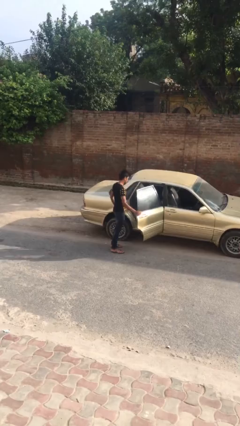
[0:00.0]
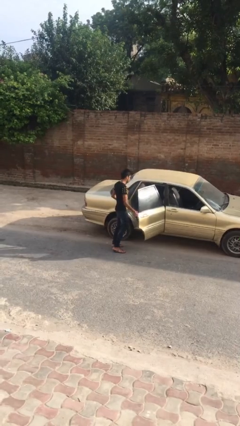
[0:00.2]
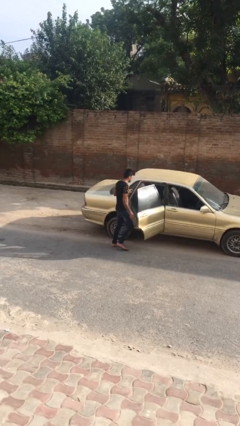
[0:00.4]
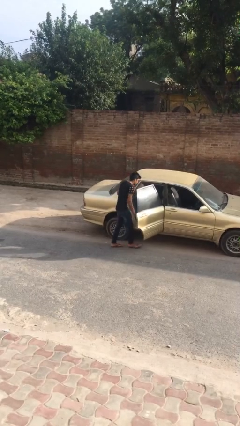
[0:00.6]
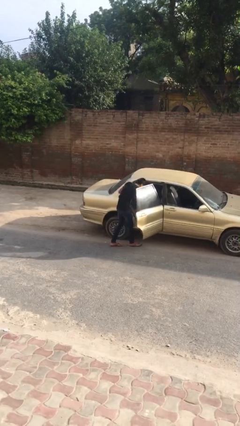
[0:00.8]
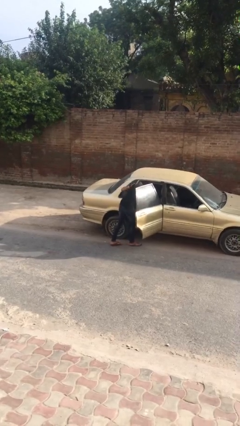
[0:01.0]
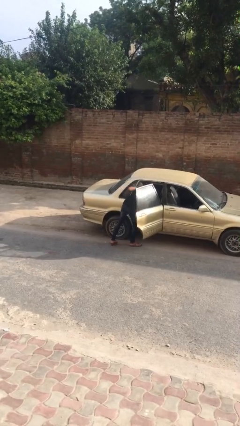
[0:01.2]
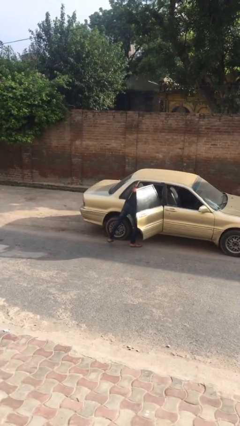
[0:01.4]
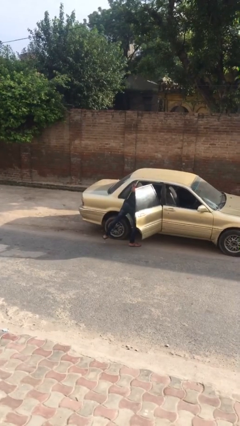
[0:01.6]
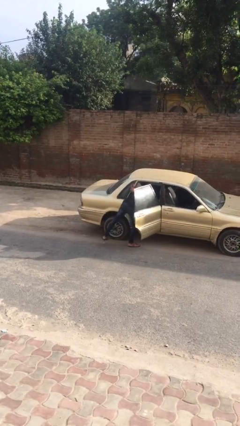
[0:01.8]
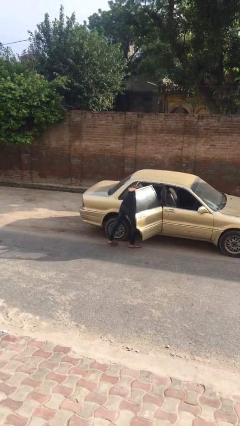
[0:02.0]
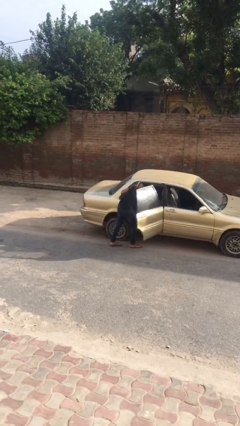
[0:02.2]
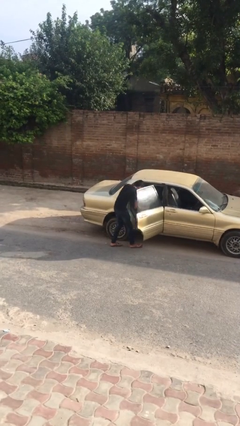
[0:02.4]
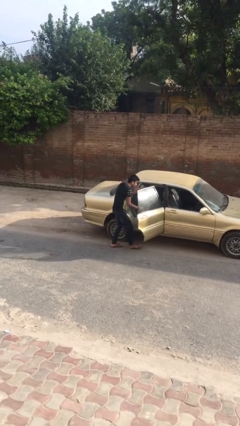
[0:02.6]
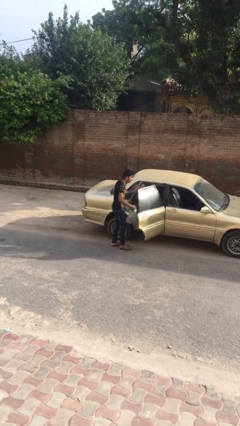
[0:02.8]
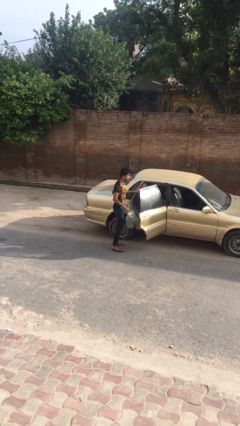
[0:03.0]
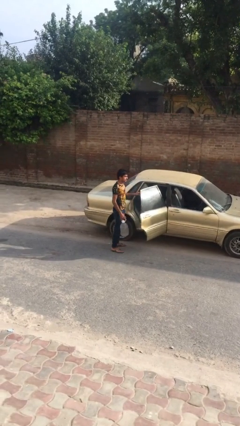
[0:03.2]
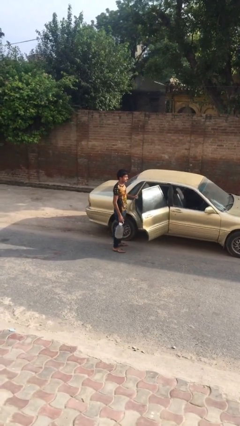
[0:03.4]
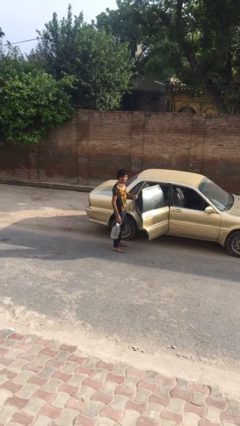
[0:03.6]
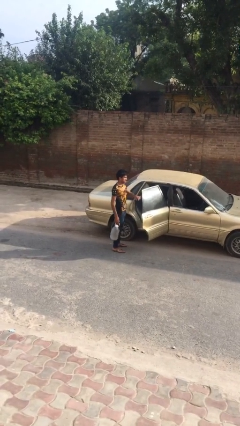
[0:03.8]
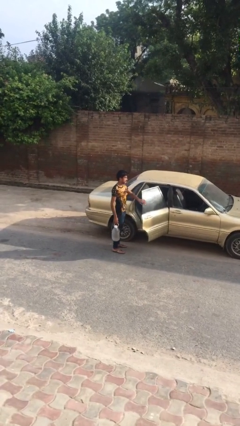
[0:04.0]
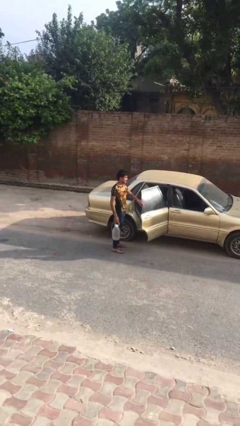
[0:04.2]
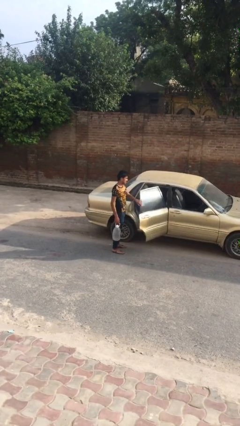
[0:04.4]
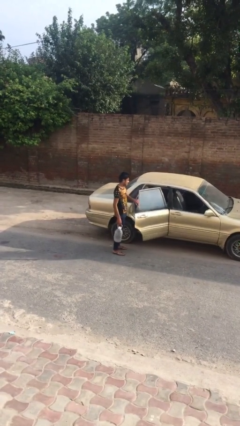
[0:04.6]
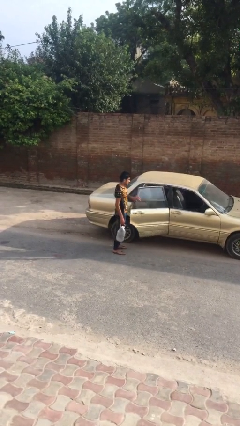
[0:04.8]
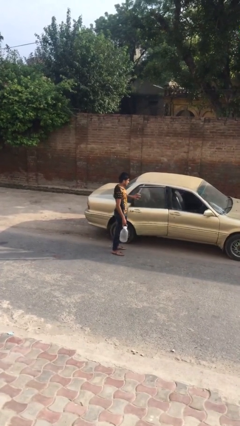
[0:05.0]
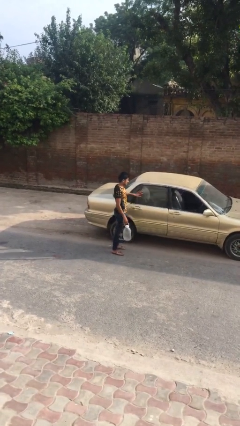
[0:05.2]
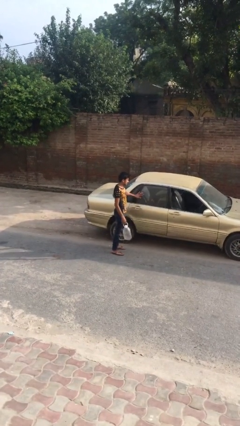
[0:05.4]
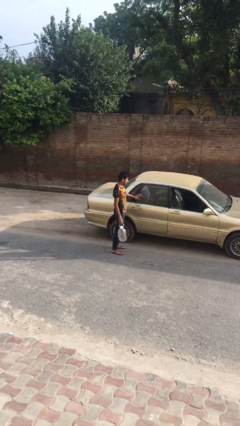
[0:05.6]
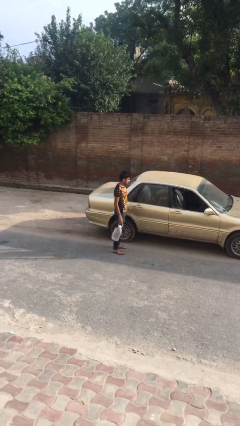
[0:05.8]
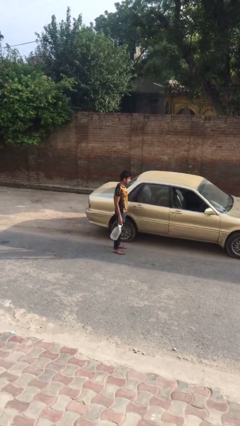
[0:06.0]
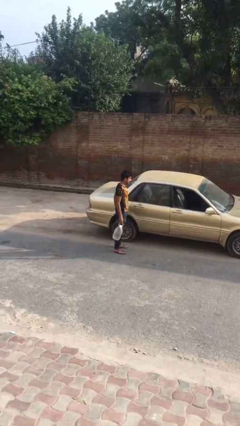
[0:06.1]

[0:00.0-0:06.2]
person unloads car

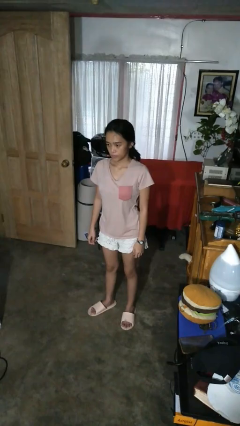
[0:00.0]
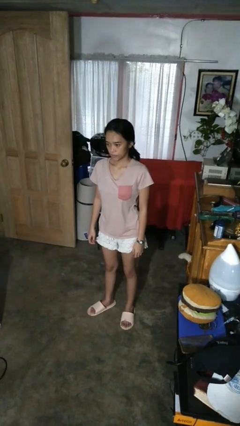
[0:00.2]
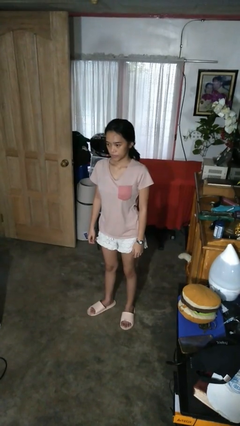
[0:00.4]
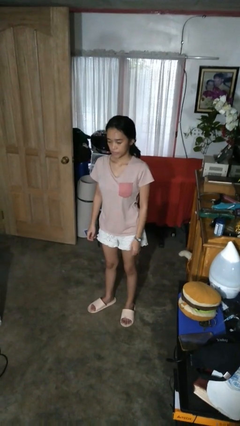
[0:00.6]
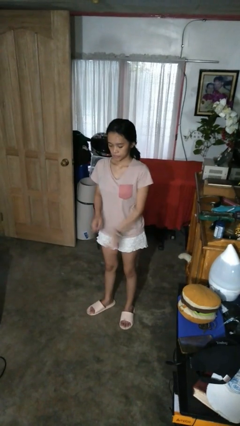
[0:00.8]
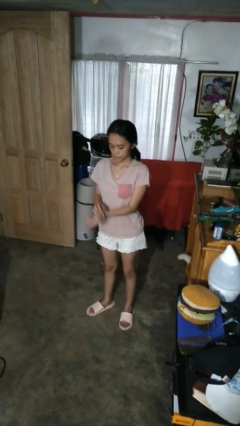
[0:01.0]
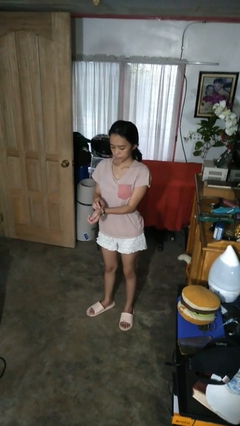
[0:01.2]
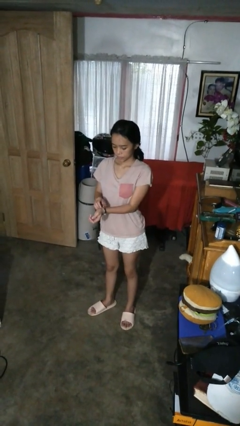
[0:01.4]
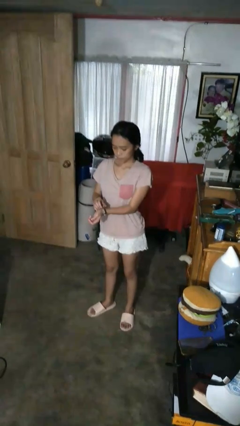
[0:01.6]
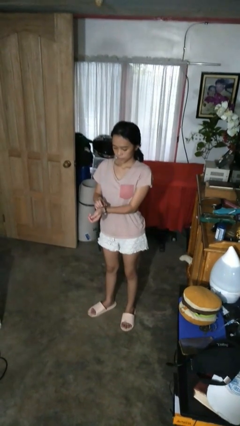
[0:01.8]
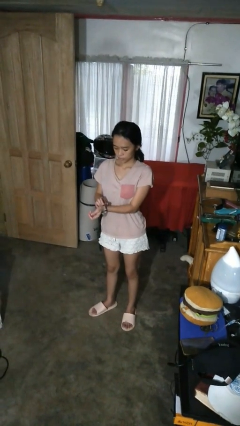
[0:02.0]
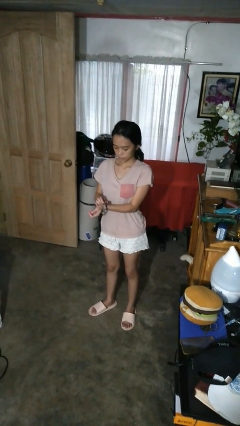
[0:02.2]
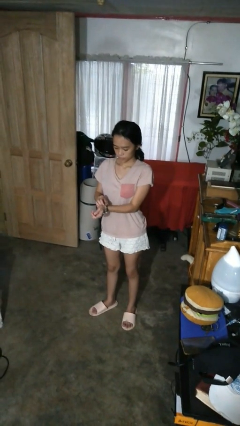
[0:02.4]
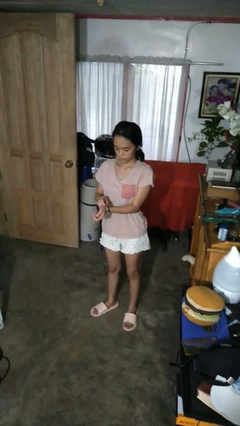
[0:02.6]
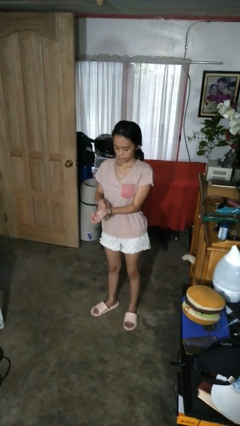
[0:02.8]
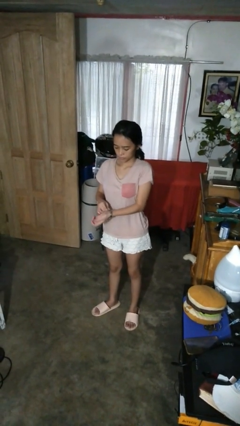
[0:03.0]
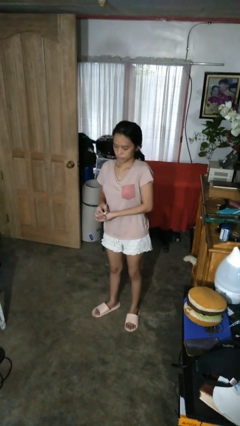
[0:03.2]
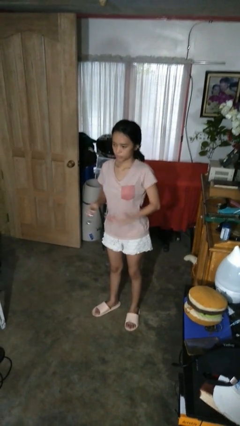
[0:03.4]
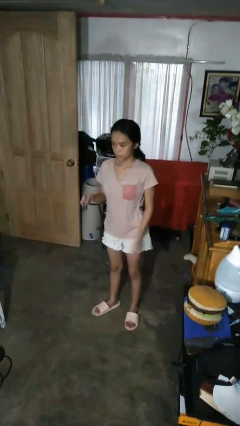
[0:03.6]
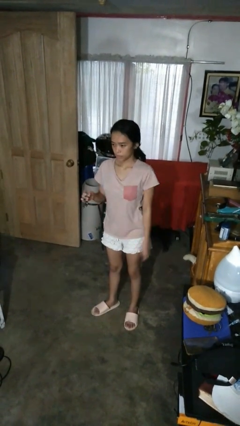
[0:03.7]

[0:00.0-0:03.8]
person takes off wristwatch

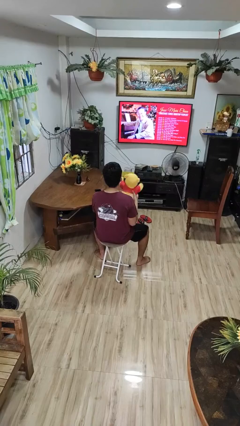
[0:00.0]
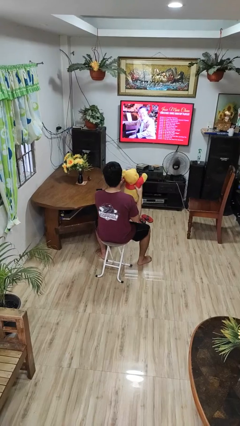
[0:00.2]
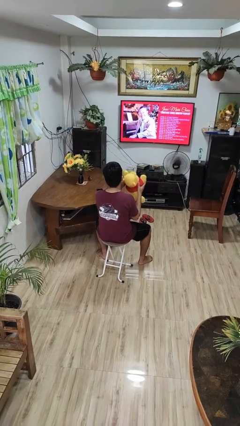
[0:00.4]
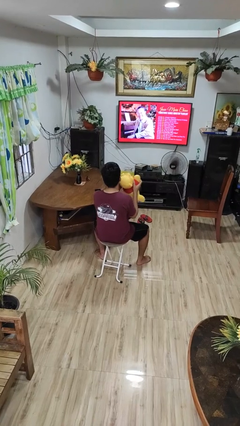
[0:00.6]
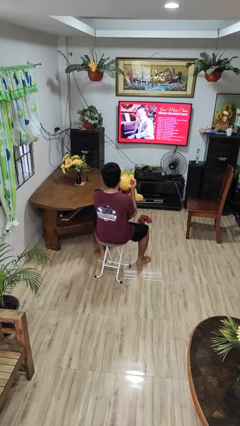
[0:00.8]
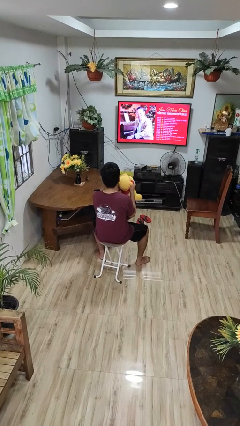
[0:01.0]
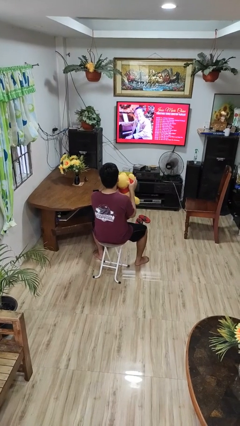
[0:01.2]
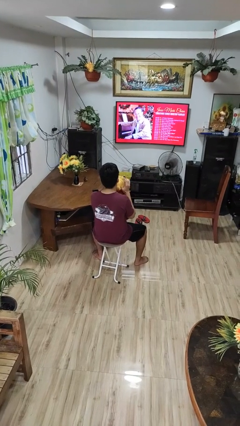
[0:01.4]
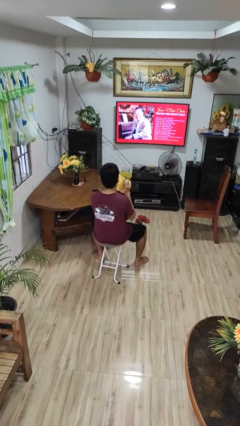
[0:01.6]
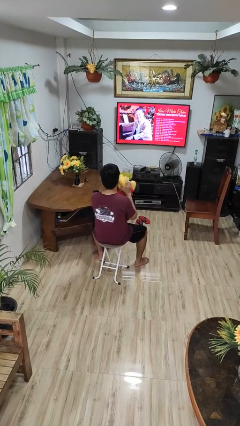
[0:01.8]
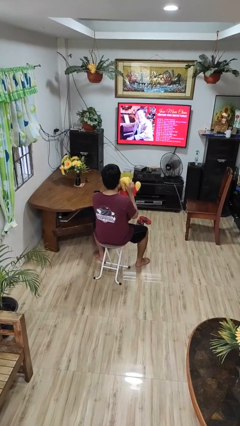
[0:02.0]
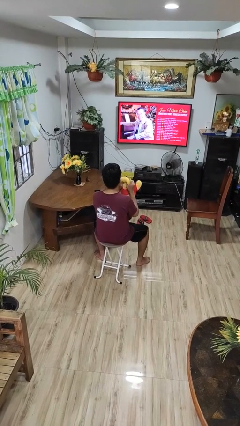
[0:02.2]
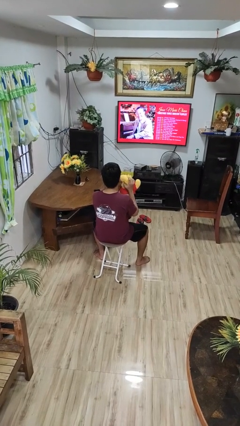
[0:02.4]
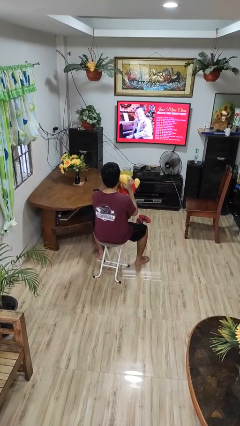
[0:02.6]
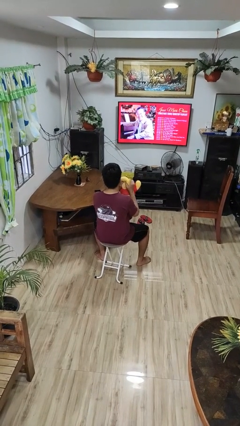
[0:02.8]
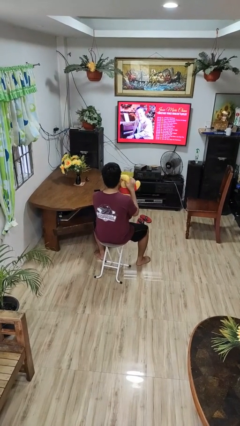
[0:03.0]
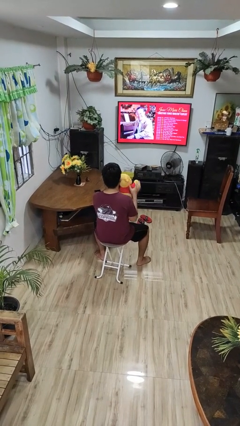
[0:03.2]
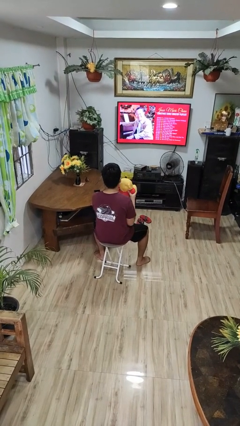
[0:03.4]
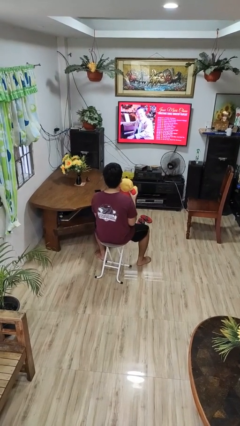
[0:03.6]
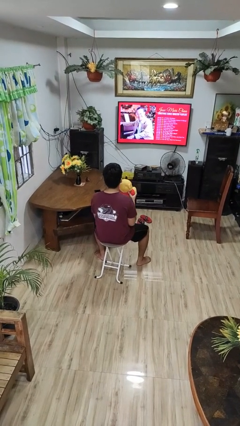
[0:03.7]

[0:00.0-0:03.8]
person squeezes object

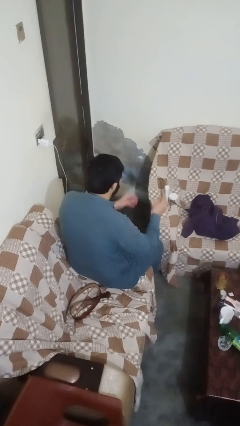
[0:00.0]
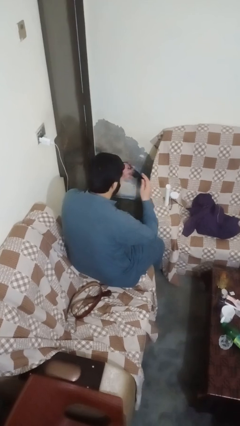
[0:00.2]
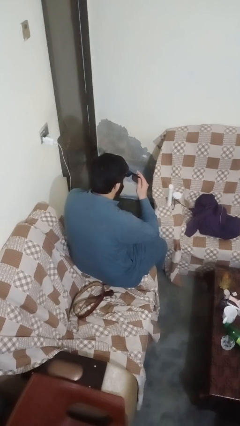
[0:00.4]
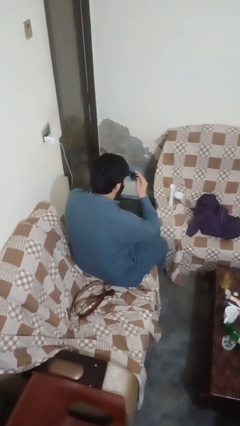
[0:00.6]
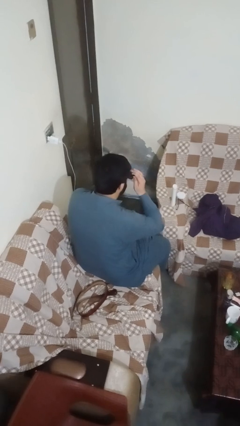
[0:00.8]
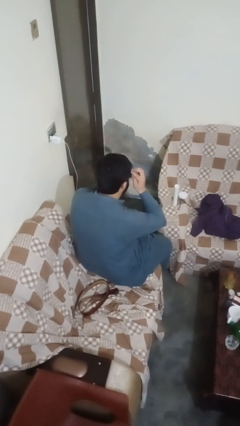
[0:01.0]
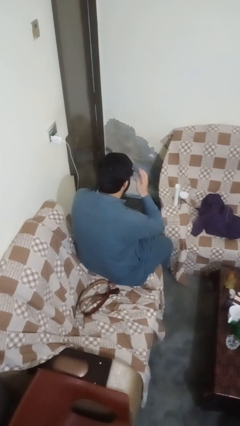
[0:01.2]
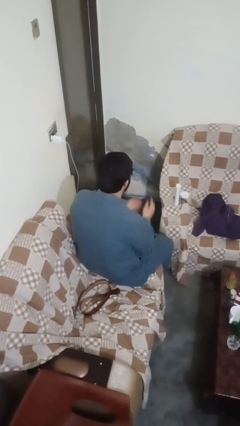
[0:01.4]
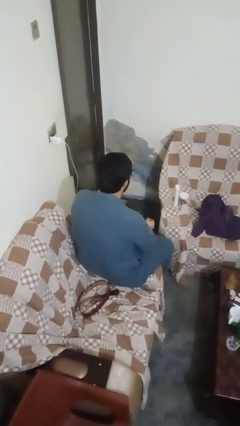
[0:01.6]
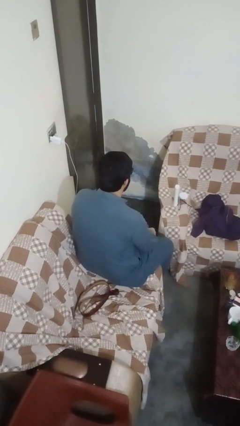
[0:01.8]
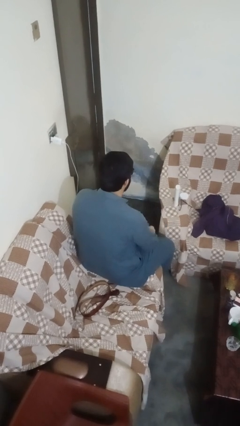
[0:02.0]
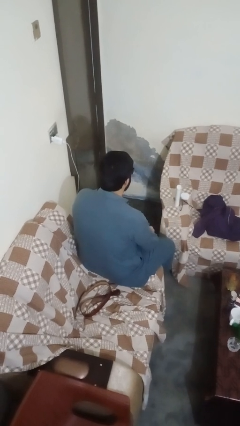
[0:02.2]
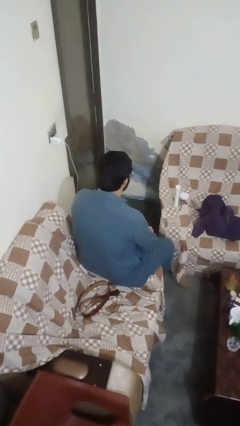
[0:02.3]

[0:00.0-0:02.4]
person puts on sunglasses

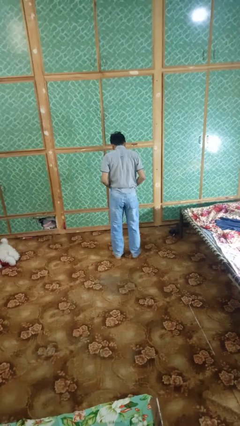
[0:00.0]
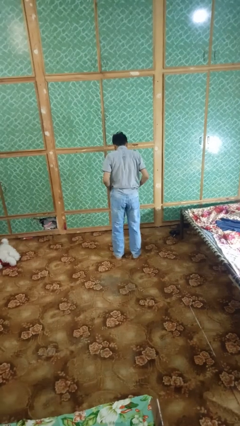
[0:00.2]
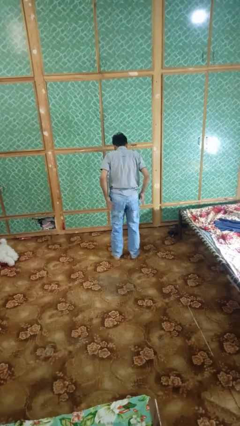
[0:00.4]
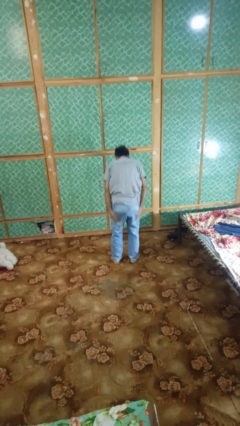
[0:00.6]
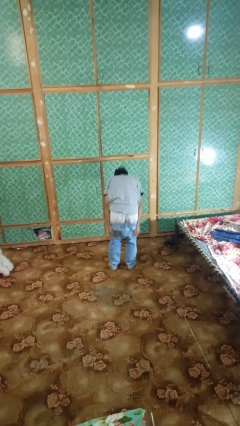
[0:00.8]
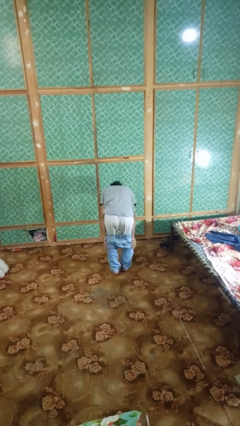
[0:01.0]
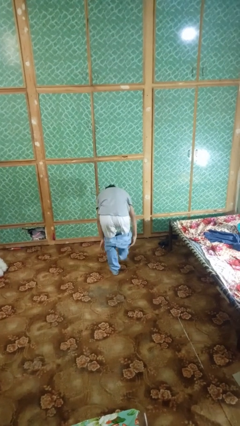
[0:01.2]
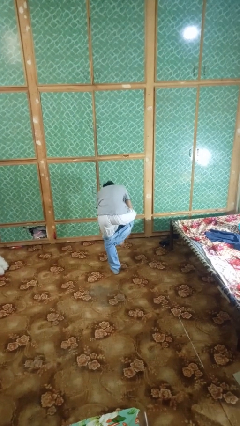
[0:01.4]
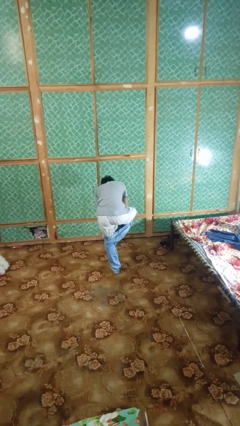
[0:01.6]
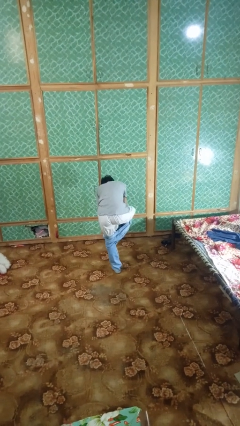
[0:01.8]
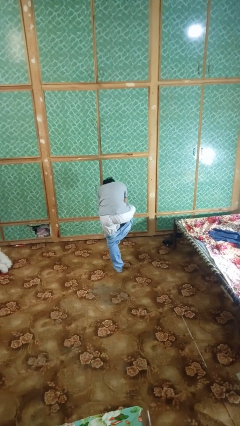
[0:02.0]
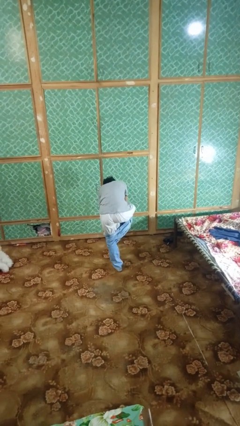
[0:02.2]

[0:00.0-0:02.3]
person takes off pants
